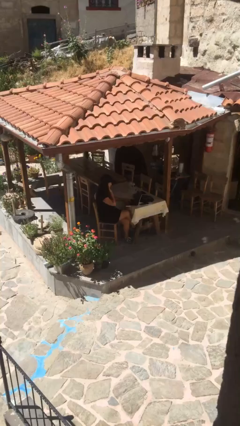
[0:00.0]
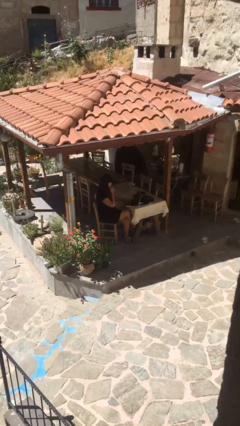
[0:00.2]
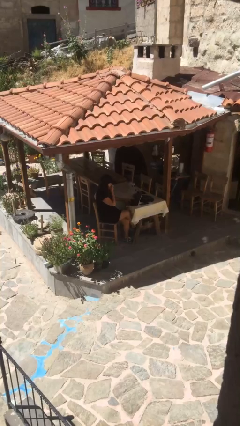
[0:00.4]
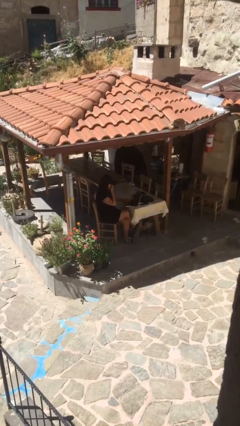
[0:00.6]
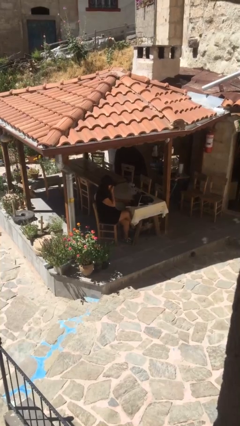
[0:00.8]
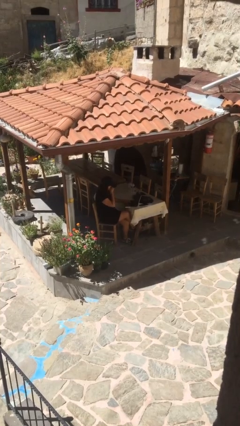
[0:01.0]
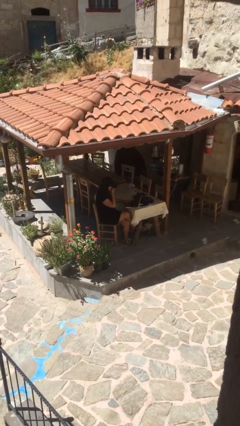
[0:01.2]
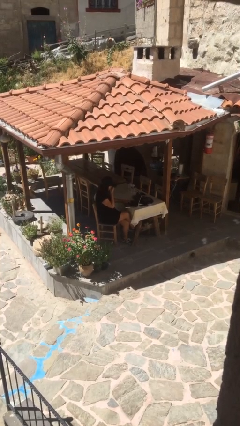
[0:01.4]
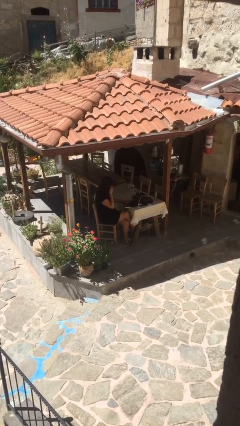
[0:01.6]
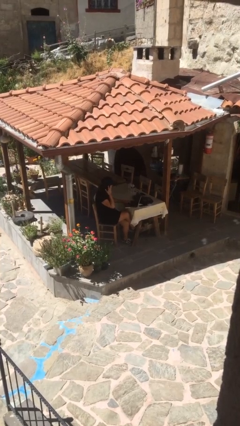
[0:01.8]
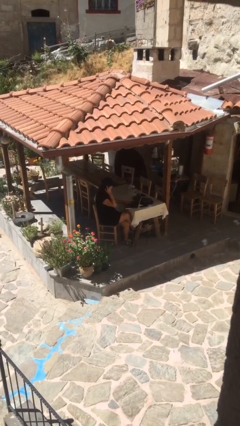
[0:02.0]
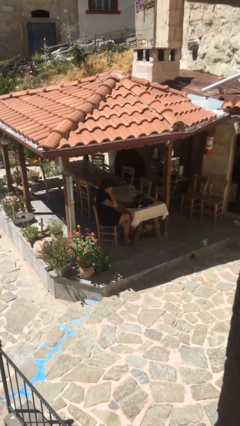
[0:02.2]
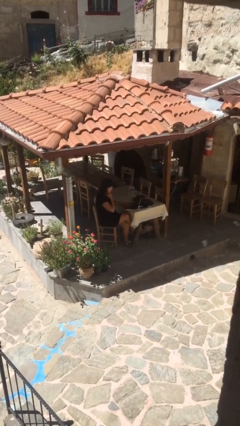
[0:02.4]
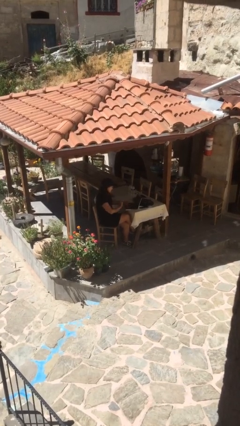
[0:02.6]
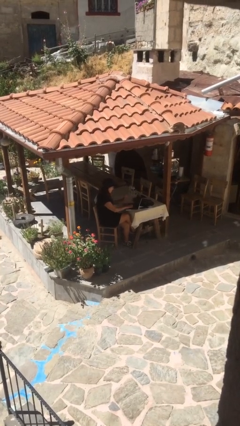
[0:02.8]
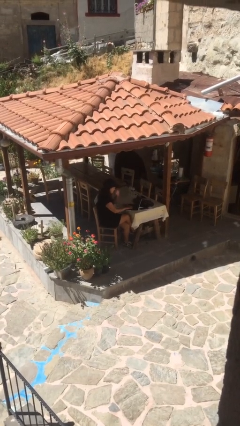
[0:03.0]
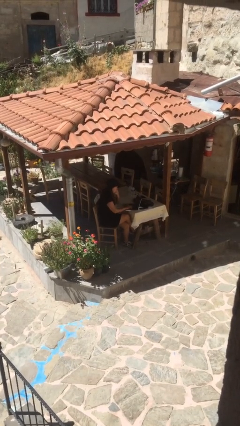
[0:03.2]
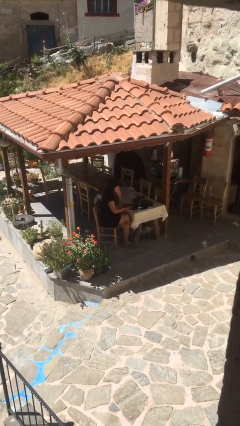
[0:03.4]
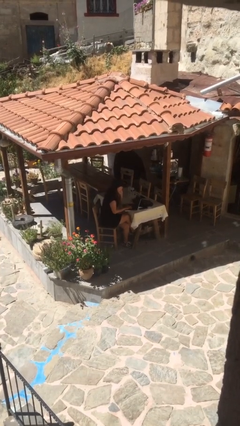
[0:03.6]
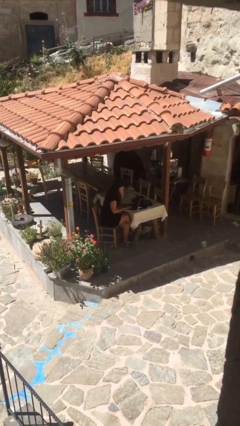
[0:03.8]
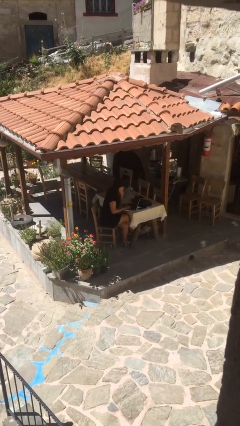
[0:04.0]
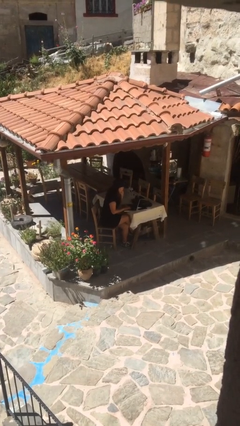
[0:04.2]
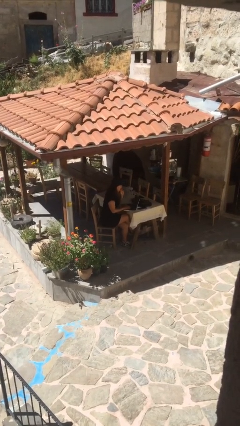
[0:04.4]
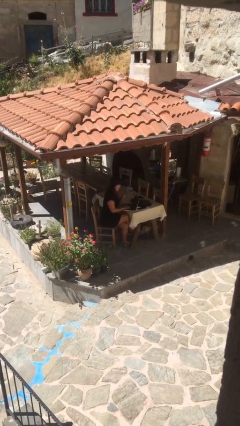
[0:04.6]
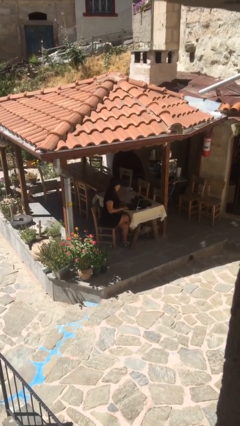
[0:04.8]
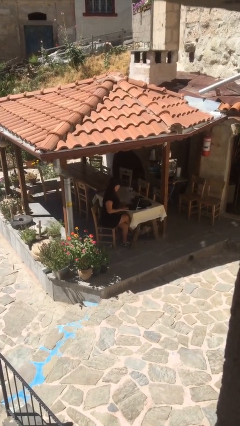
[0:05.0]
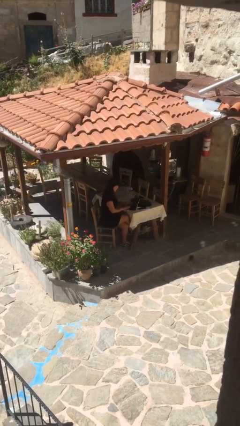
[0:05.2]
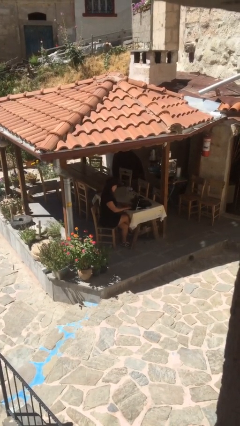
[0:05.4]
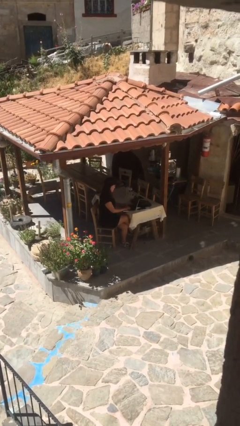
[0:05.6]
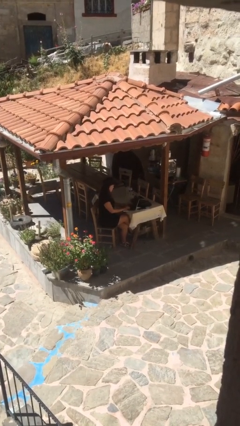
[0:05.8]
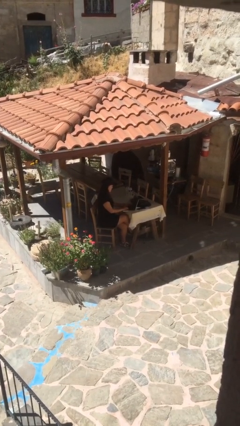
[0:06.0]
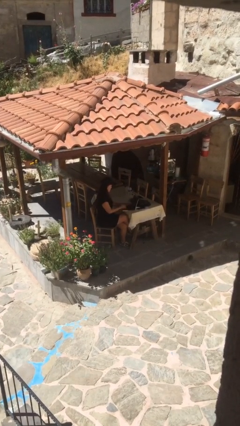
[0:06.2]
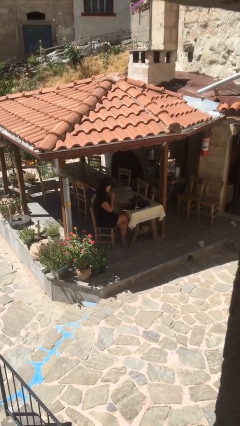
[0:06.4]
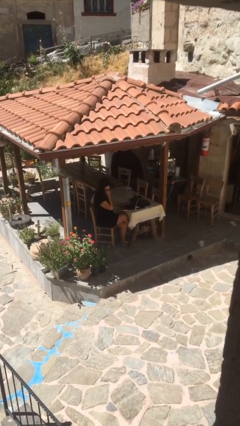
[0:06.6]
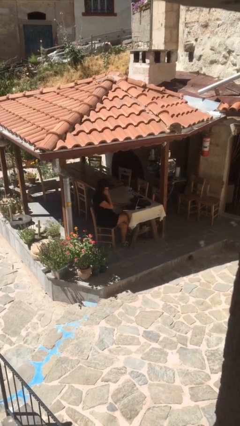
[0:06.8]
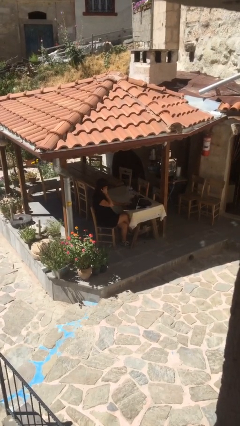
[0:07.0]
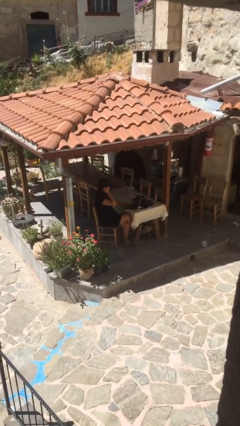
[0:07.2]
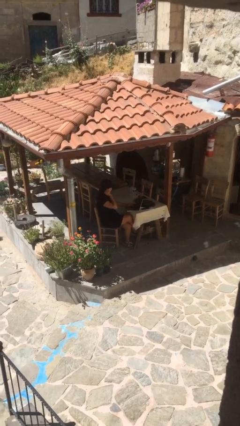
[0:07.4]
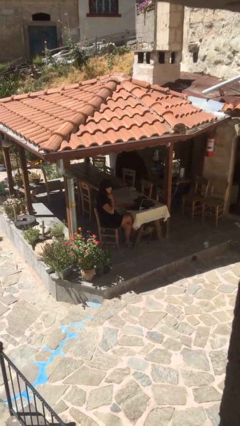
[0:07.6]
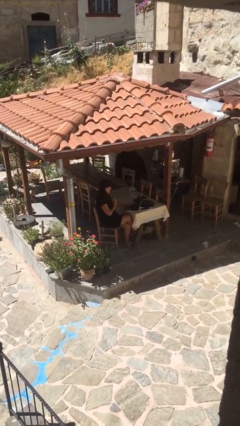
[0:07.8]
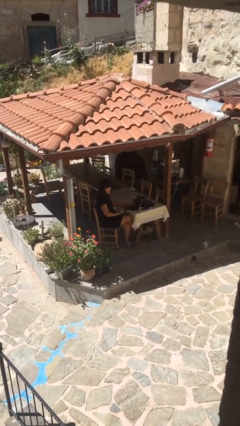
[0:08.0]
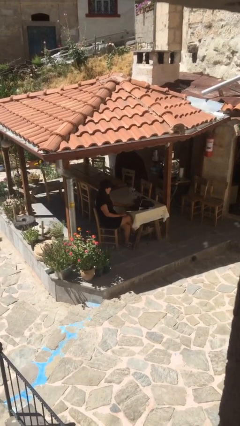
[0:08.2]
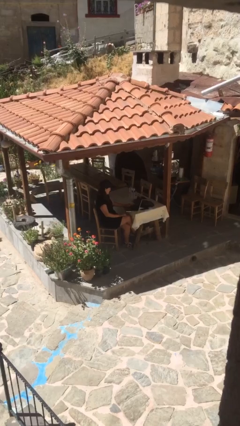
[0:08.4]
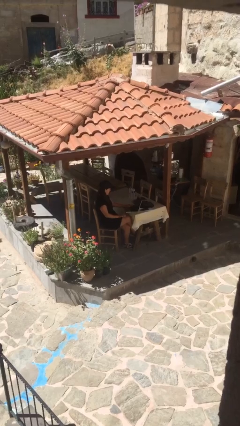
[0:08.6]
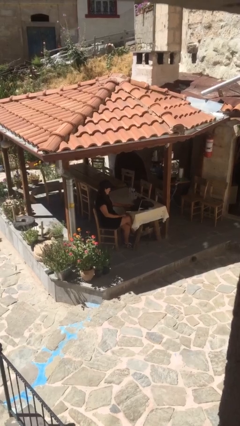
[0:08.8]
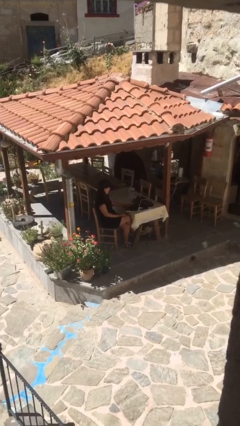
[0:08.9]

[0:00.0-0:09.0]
person interacts with laptop

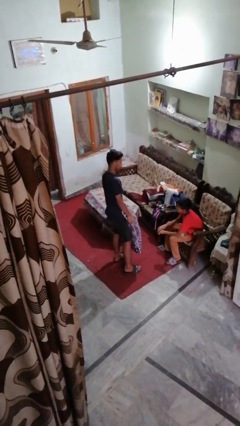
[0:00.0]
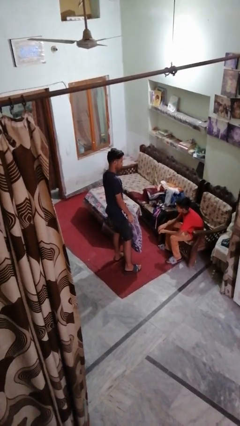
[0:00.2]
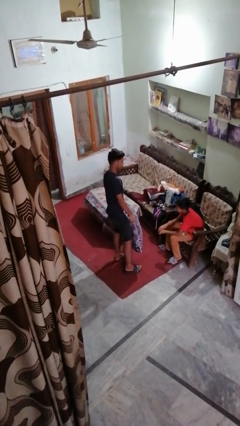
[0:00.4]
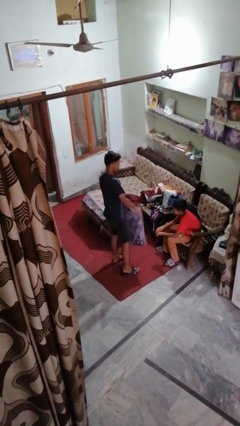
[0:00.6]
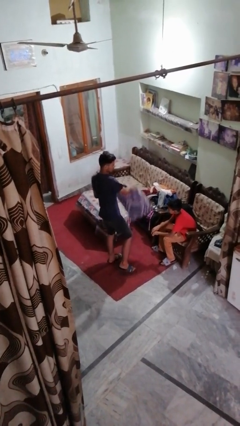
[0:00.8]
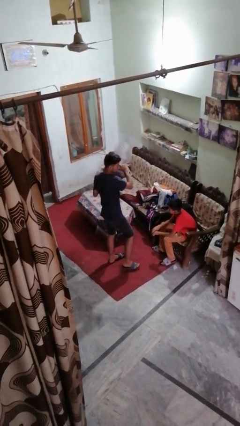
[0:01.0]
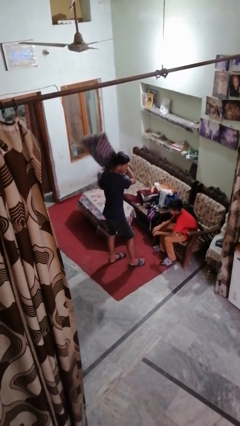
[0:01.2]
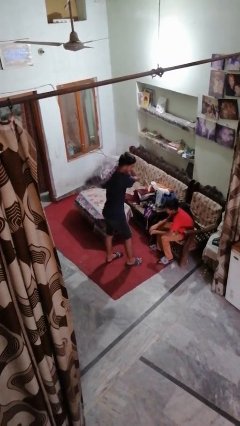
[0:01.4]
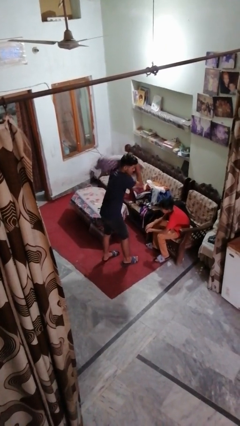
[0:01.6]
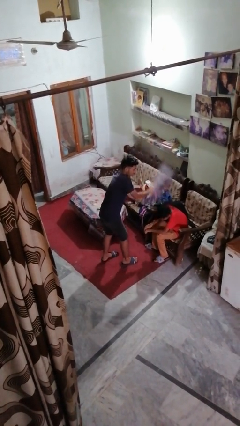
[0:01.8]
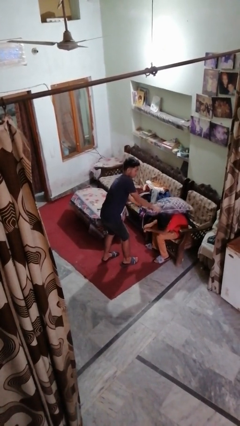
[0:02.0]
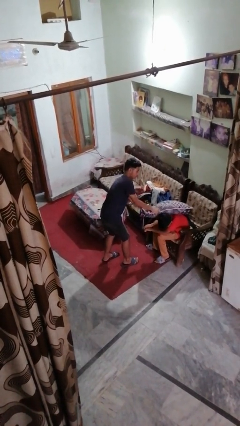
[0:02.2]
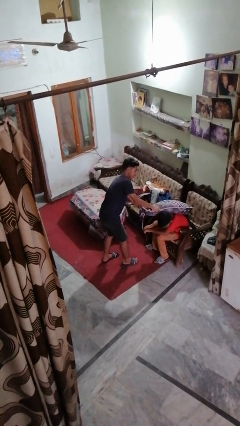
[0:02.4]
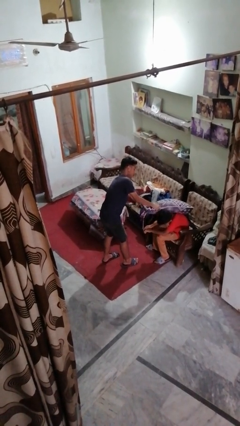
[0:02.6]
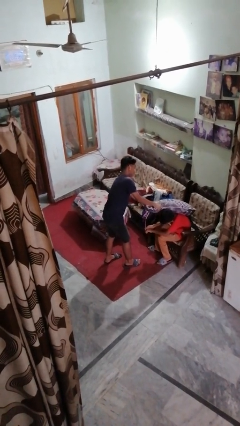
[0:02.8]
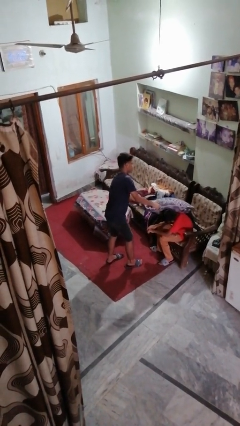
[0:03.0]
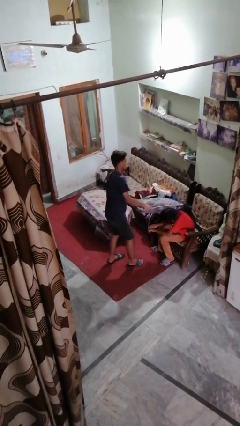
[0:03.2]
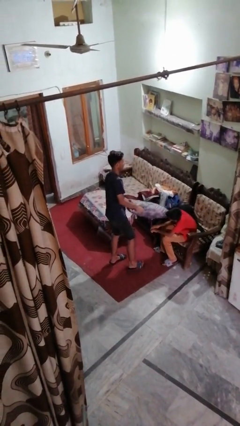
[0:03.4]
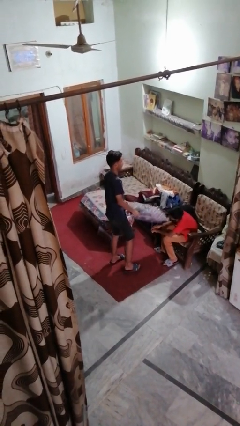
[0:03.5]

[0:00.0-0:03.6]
person hits person with pillow

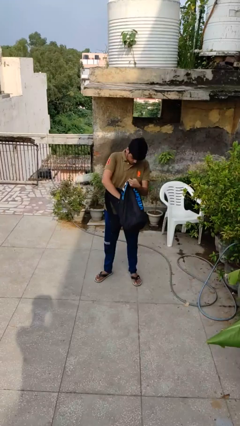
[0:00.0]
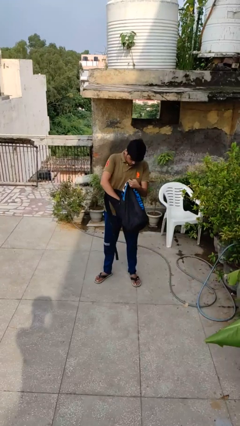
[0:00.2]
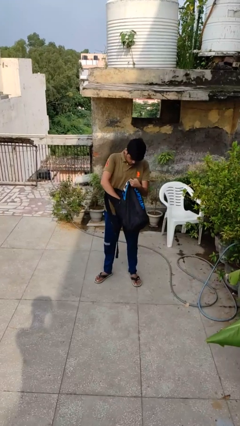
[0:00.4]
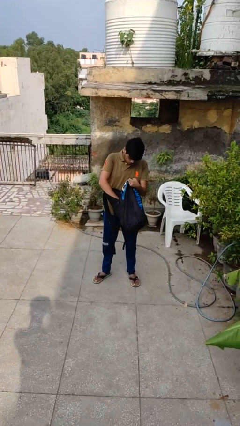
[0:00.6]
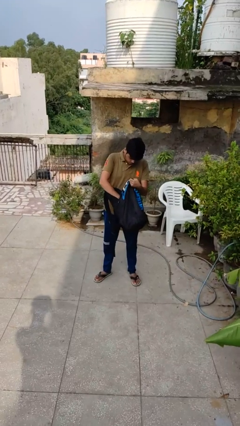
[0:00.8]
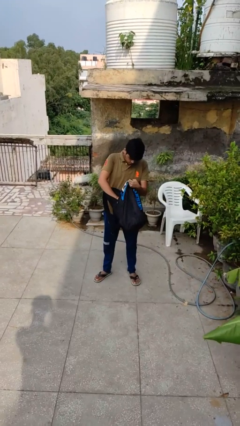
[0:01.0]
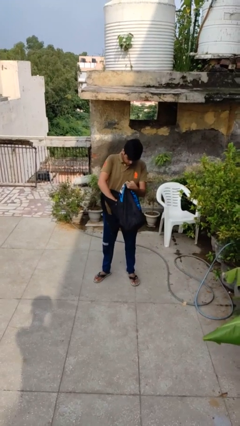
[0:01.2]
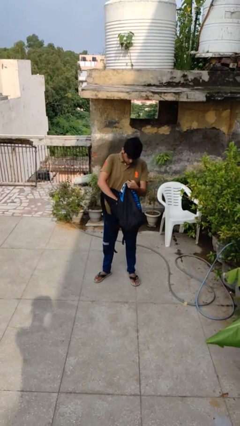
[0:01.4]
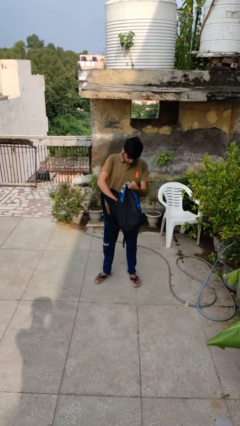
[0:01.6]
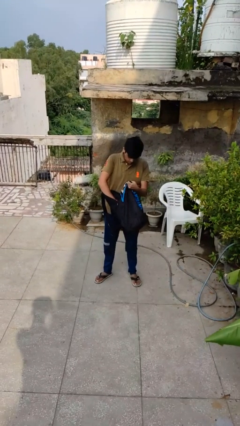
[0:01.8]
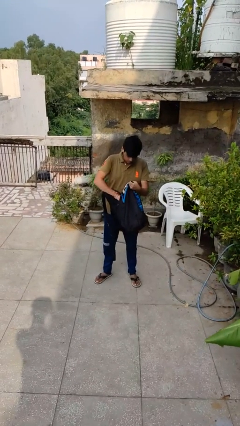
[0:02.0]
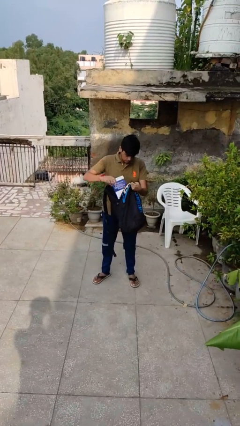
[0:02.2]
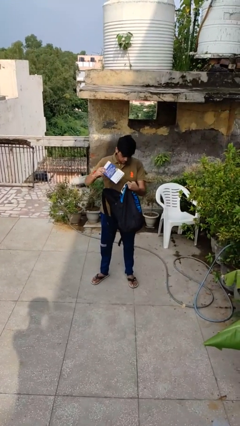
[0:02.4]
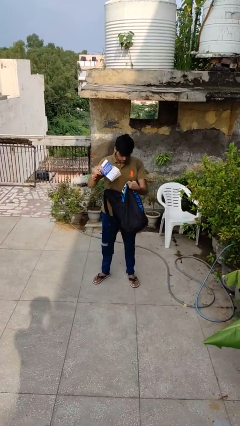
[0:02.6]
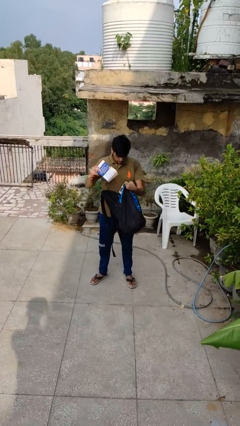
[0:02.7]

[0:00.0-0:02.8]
person searches in backpack

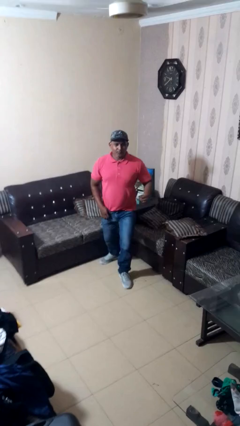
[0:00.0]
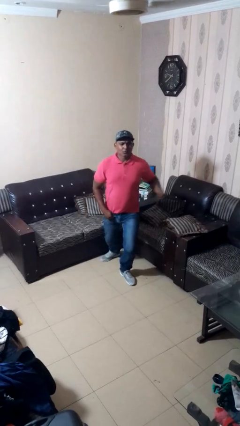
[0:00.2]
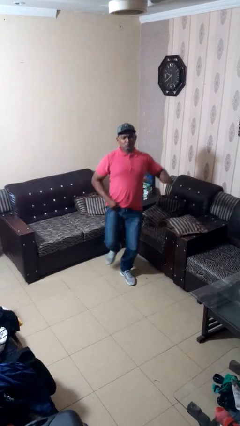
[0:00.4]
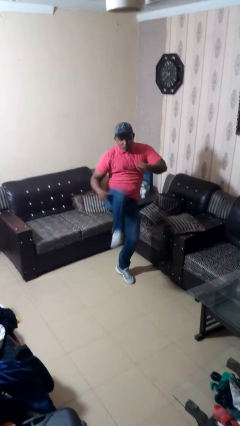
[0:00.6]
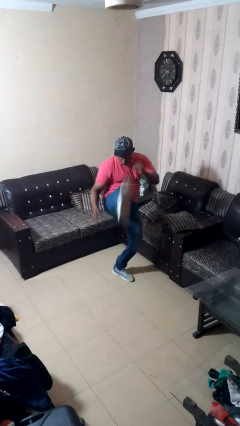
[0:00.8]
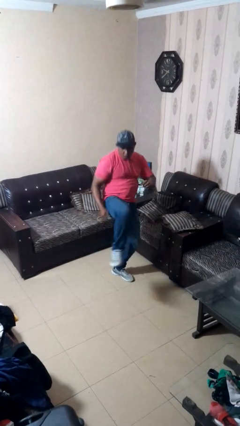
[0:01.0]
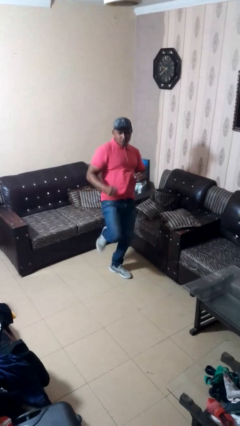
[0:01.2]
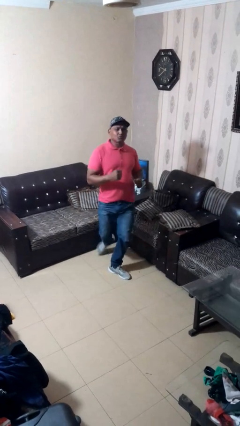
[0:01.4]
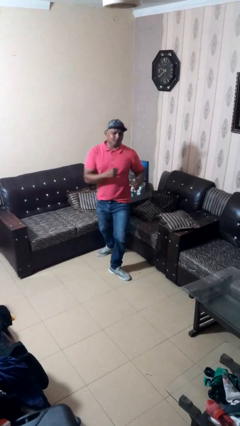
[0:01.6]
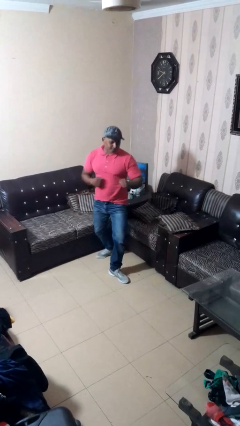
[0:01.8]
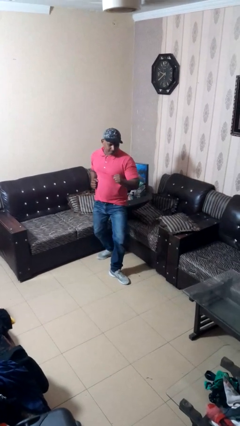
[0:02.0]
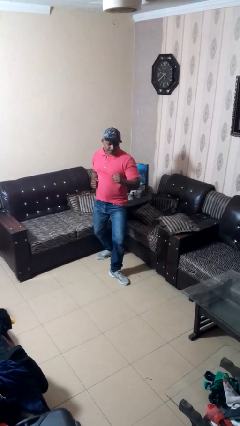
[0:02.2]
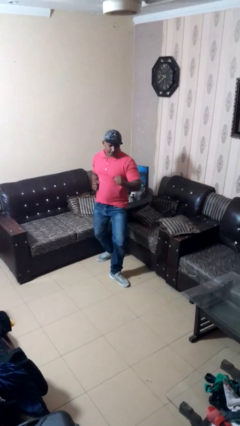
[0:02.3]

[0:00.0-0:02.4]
person karate kicks
